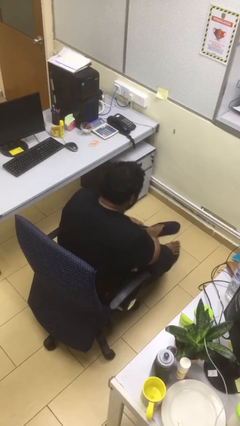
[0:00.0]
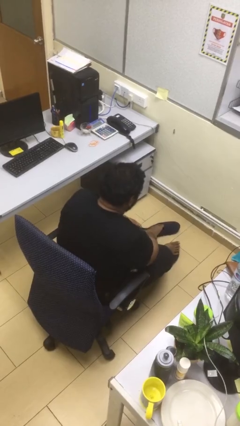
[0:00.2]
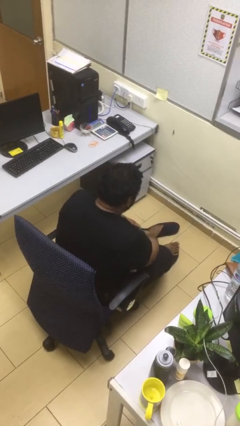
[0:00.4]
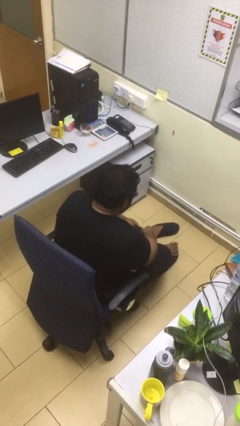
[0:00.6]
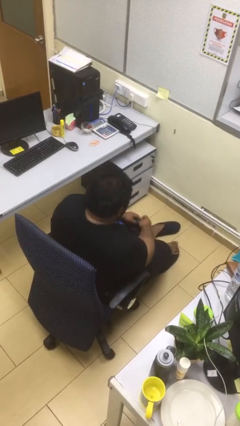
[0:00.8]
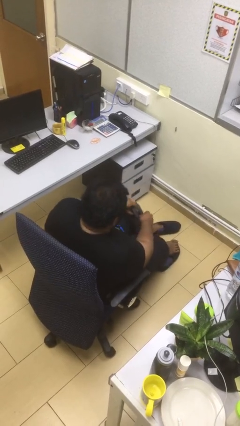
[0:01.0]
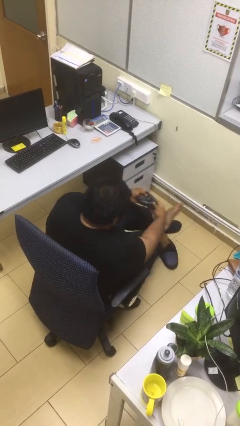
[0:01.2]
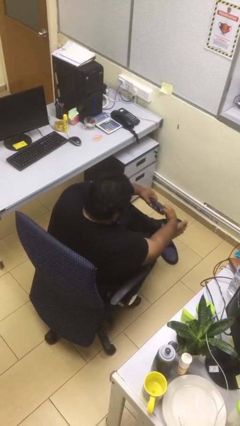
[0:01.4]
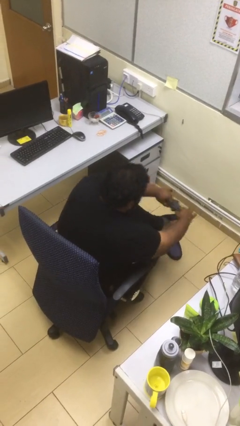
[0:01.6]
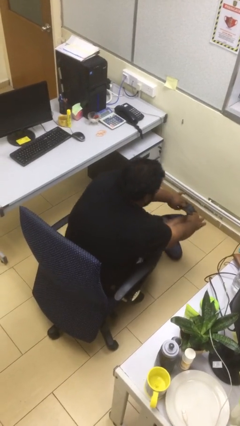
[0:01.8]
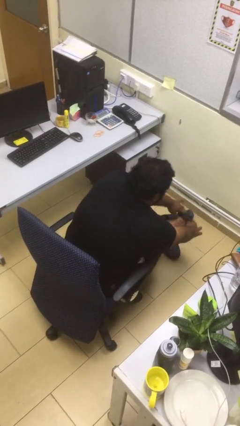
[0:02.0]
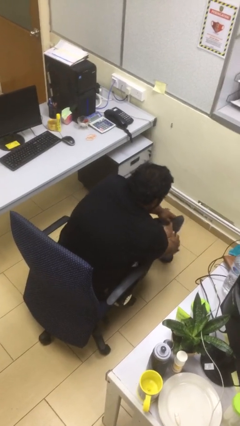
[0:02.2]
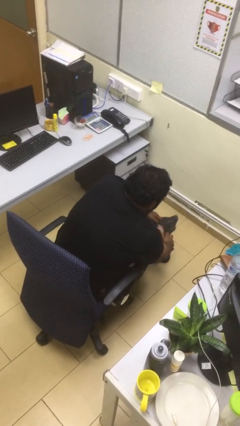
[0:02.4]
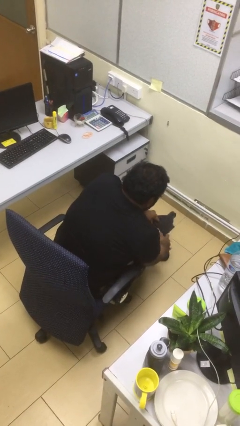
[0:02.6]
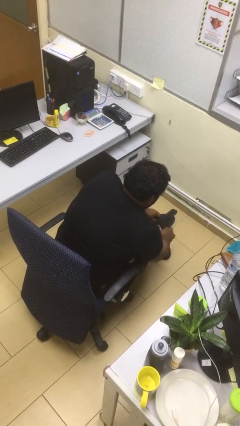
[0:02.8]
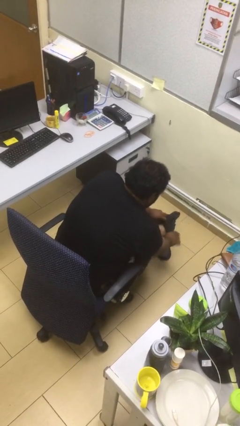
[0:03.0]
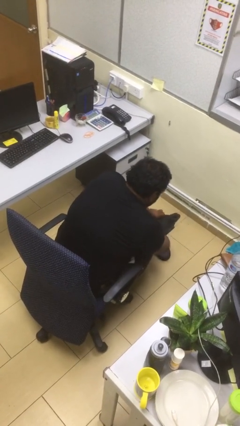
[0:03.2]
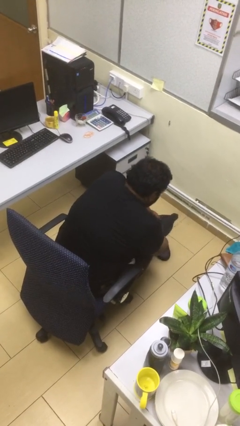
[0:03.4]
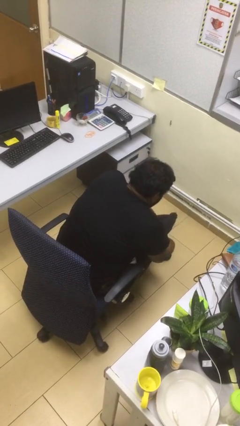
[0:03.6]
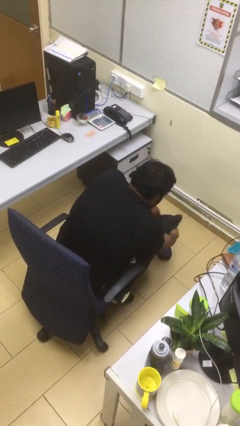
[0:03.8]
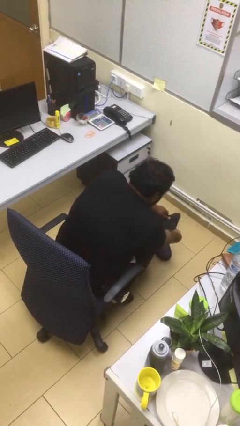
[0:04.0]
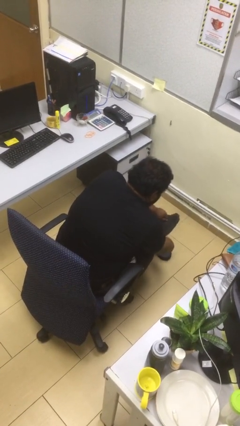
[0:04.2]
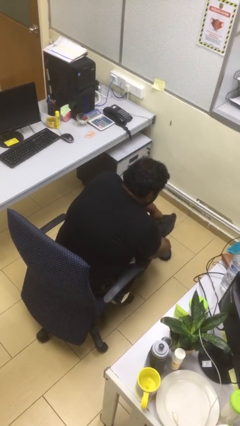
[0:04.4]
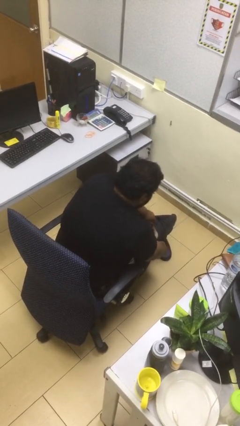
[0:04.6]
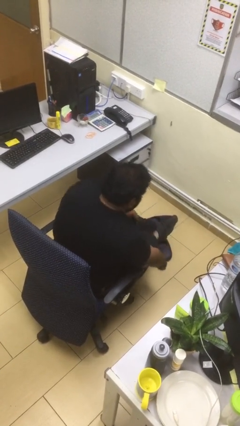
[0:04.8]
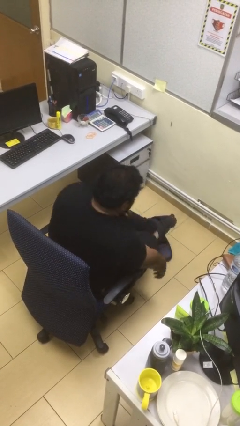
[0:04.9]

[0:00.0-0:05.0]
person puts on socks

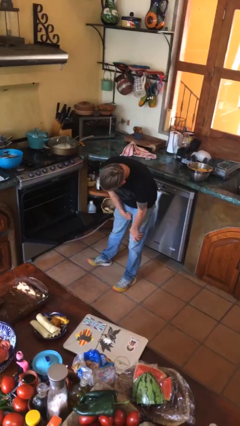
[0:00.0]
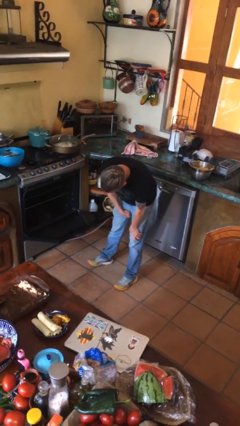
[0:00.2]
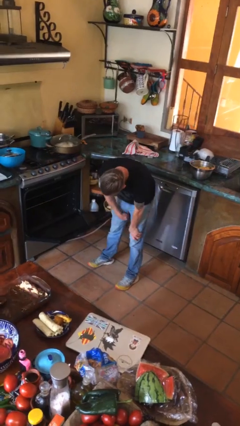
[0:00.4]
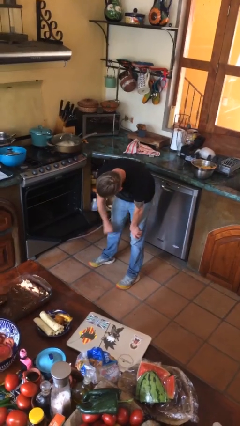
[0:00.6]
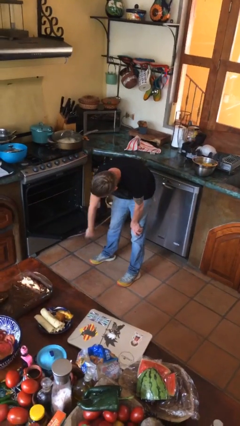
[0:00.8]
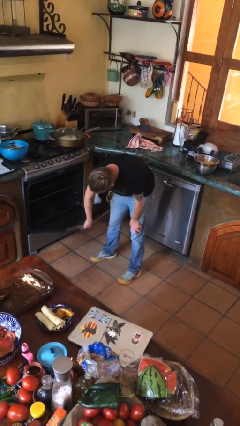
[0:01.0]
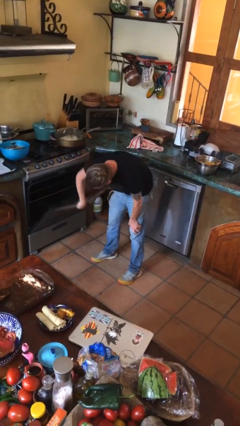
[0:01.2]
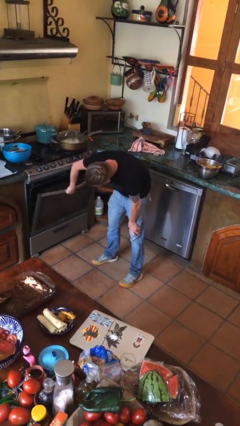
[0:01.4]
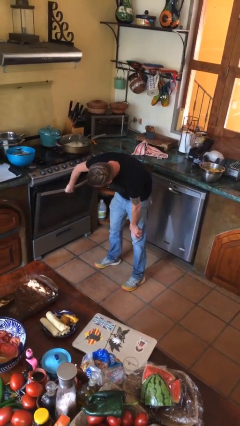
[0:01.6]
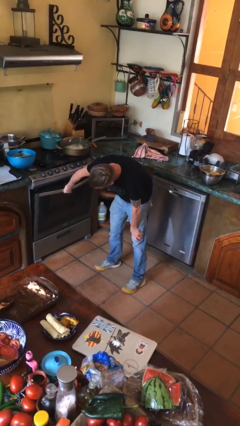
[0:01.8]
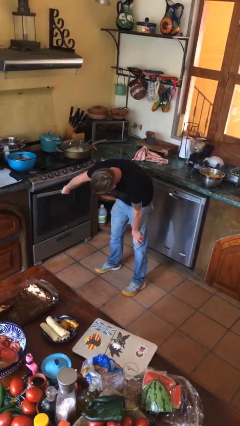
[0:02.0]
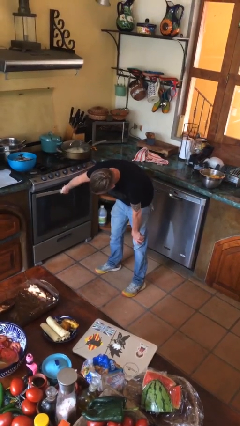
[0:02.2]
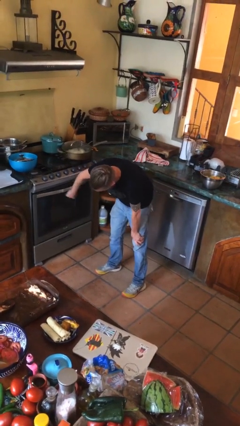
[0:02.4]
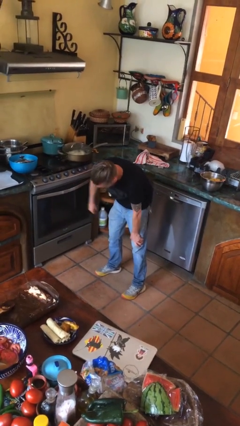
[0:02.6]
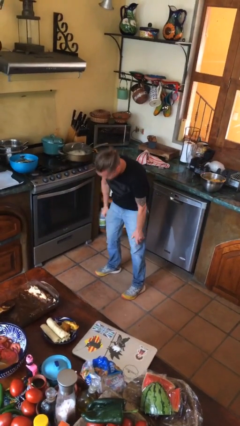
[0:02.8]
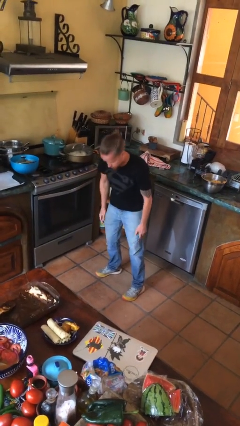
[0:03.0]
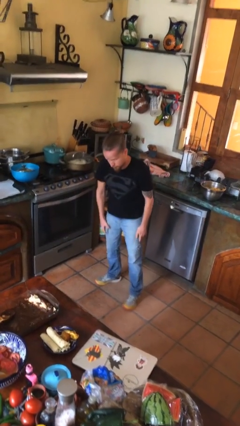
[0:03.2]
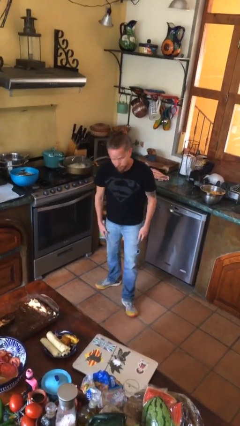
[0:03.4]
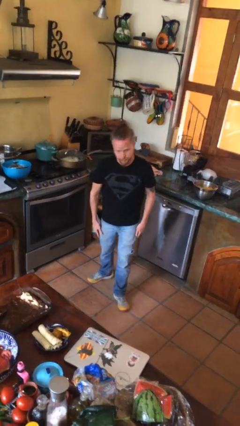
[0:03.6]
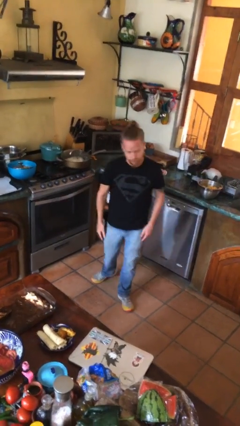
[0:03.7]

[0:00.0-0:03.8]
person closes oven door

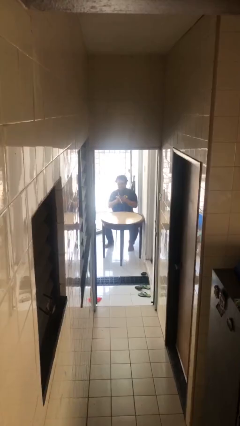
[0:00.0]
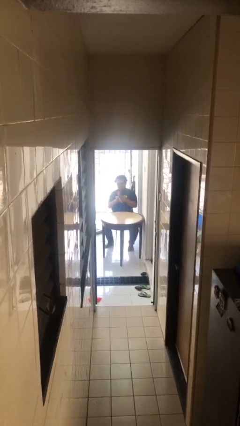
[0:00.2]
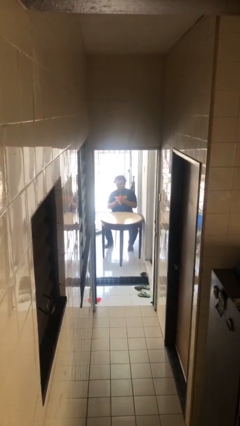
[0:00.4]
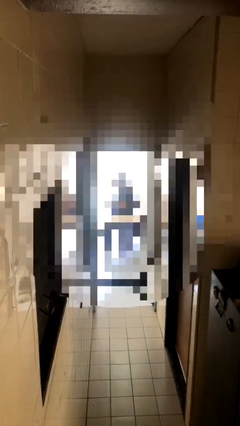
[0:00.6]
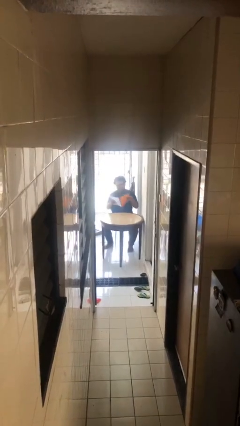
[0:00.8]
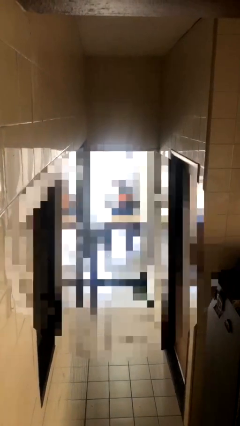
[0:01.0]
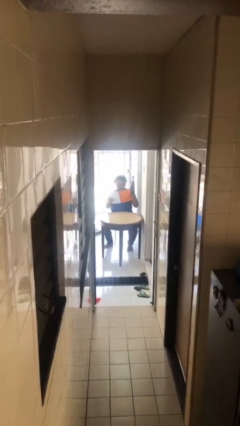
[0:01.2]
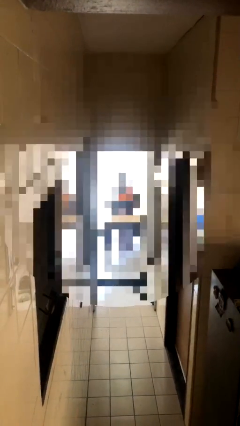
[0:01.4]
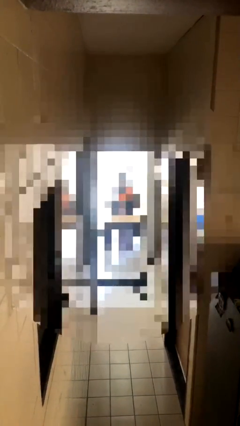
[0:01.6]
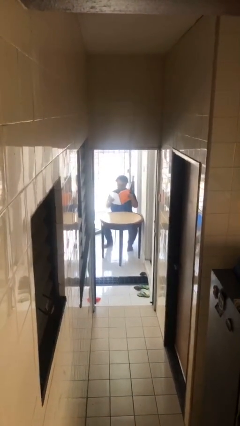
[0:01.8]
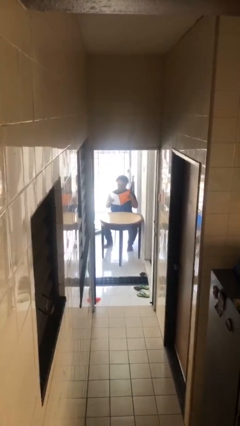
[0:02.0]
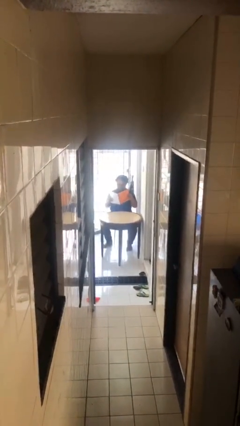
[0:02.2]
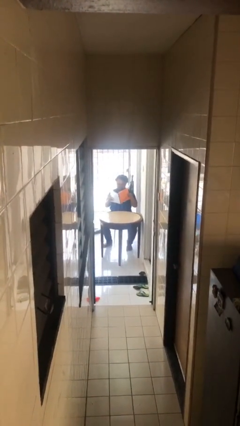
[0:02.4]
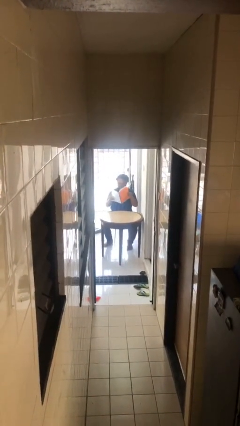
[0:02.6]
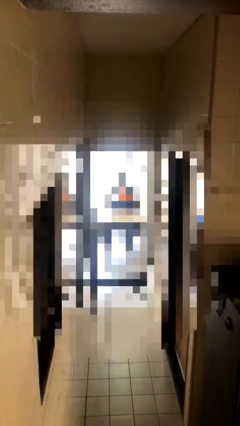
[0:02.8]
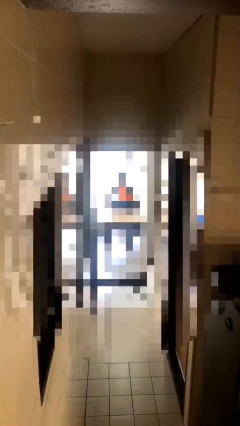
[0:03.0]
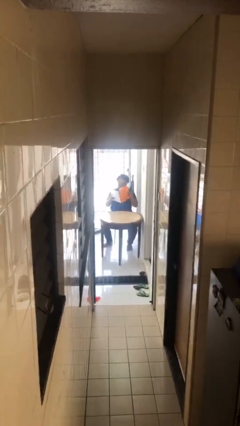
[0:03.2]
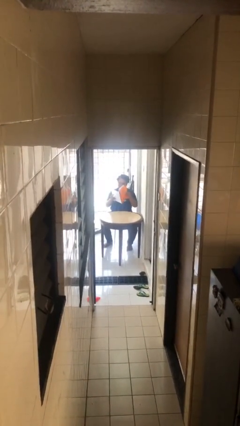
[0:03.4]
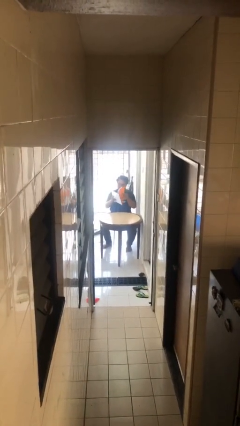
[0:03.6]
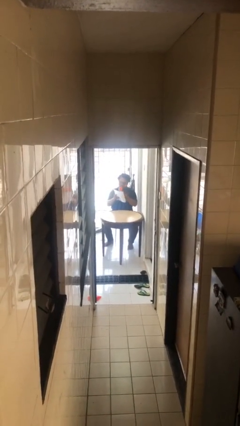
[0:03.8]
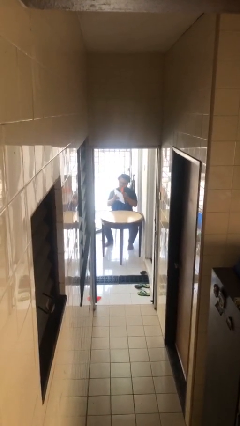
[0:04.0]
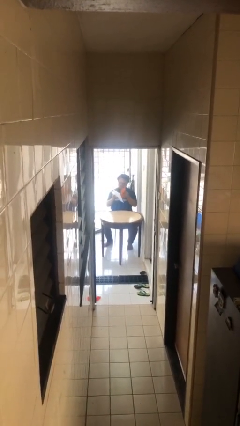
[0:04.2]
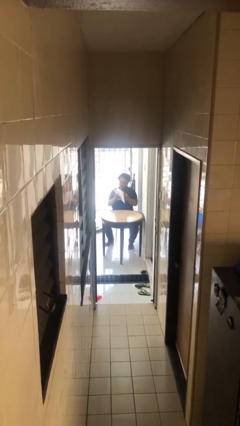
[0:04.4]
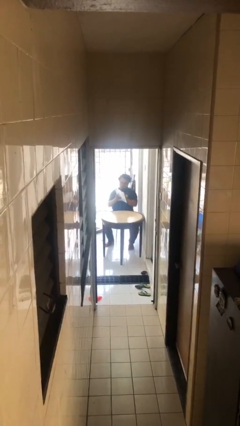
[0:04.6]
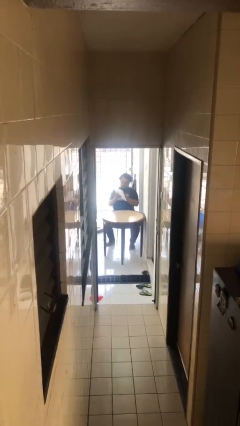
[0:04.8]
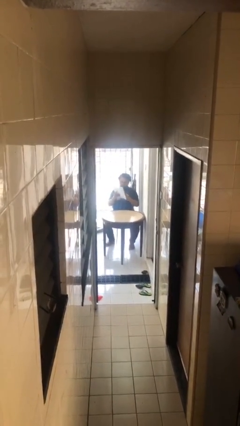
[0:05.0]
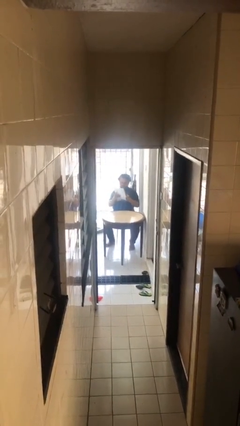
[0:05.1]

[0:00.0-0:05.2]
person reads document

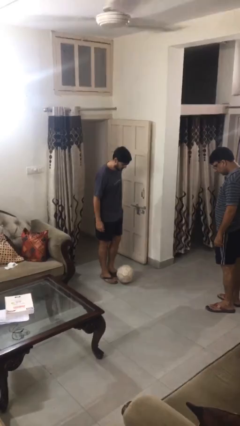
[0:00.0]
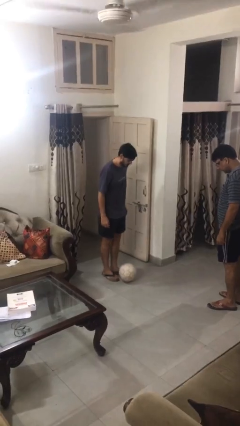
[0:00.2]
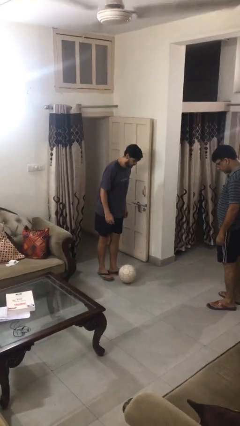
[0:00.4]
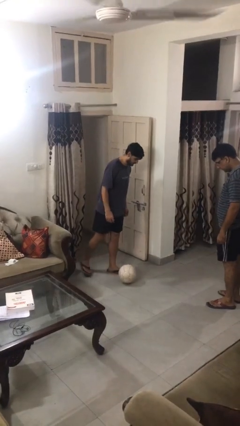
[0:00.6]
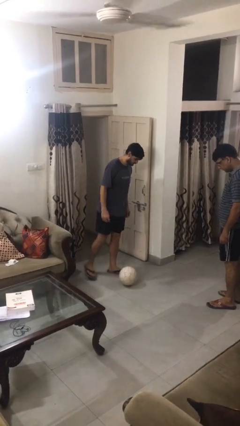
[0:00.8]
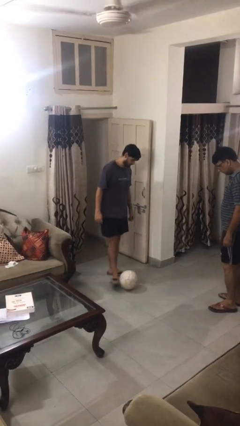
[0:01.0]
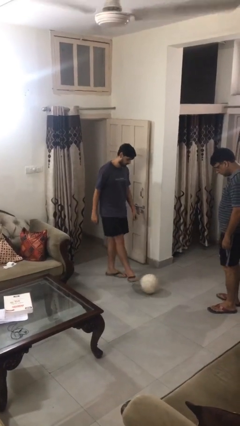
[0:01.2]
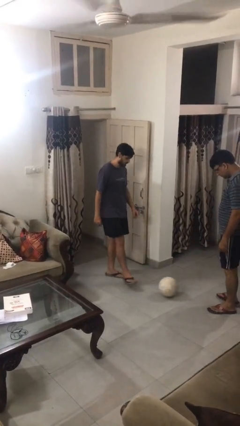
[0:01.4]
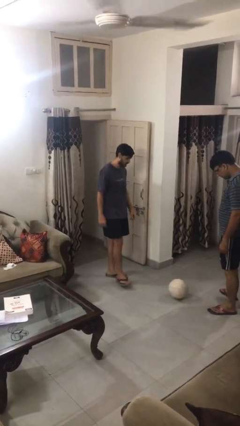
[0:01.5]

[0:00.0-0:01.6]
person kicks object to person

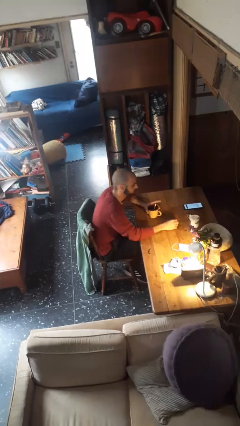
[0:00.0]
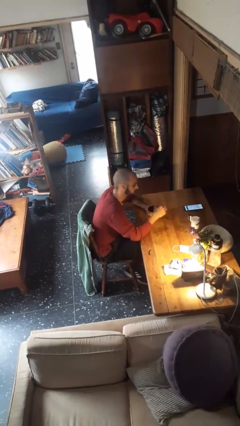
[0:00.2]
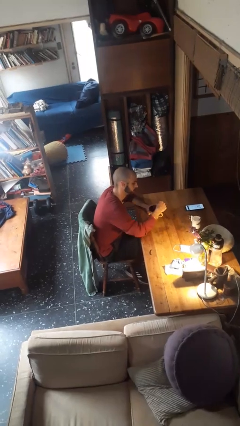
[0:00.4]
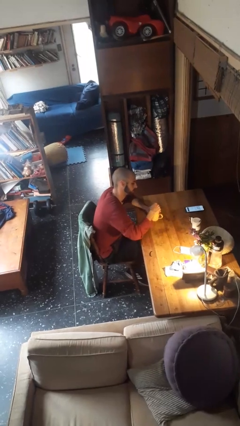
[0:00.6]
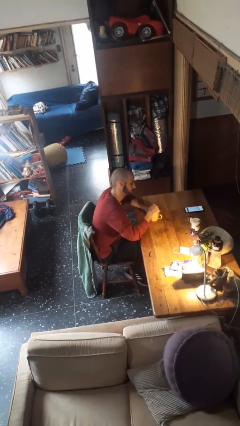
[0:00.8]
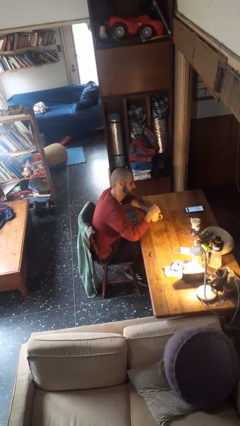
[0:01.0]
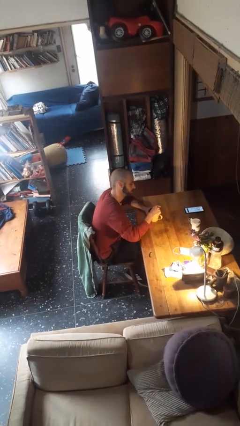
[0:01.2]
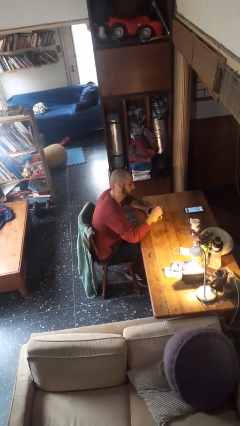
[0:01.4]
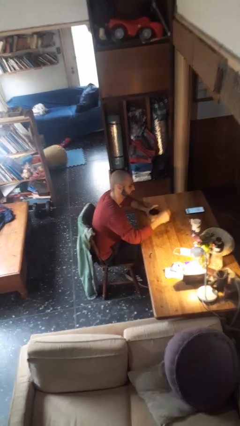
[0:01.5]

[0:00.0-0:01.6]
person stirs mug

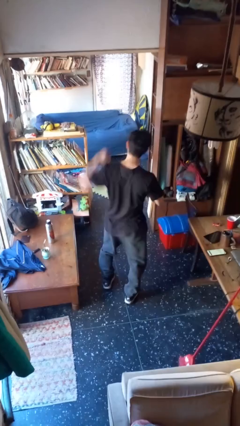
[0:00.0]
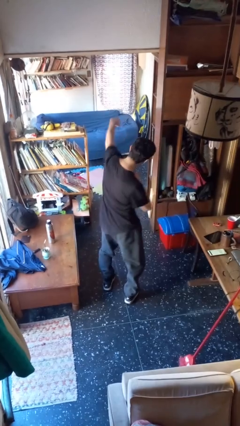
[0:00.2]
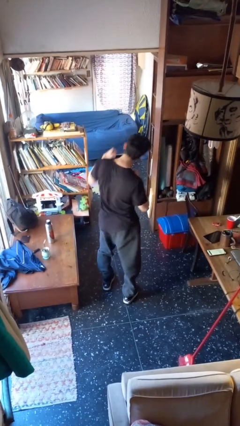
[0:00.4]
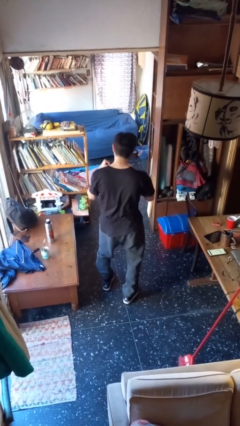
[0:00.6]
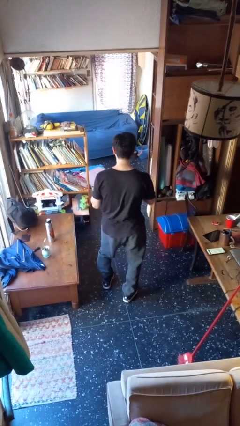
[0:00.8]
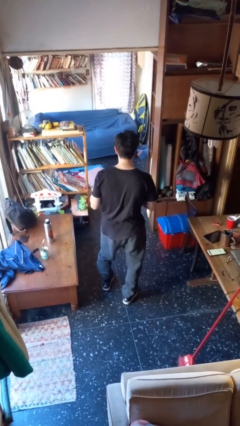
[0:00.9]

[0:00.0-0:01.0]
person karate chop
